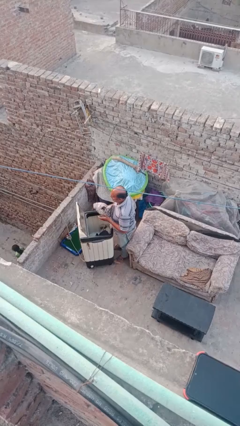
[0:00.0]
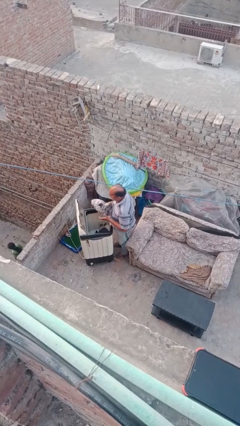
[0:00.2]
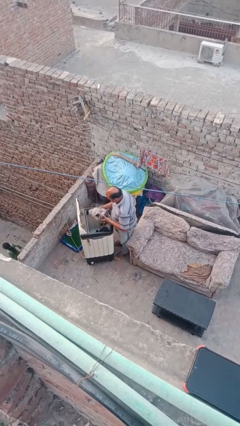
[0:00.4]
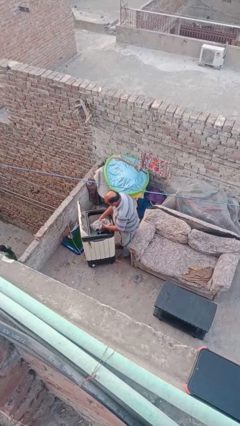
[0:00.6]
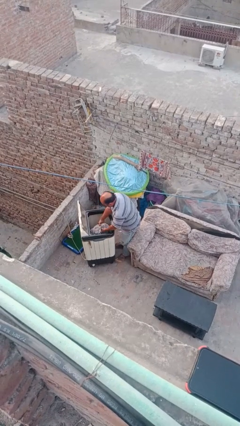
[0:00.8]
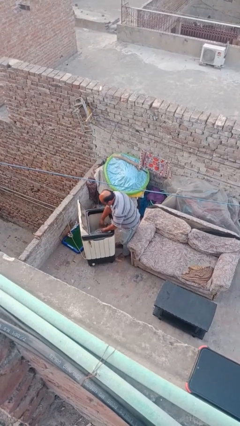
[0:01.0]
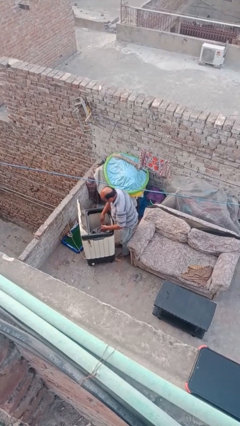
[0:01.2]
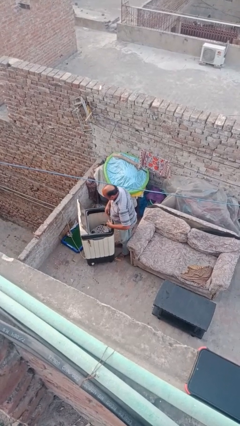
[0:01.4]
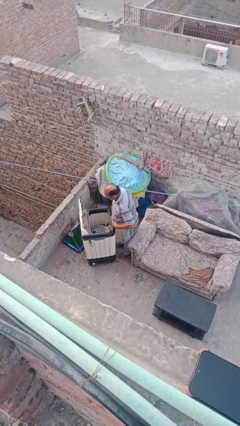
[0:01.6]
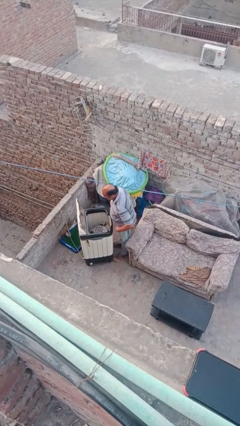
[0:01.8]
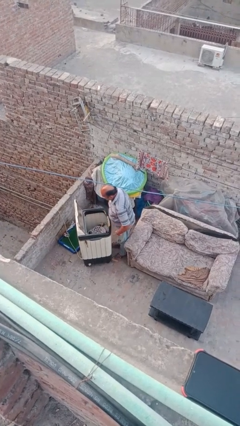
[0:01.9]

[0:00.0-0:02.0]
person loads clotheswasher

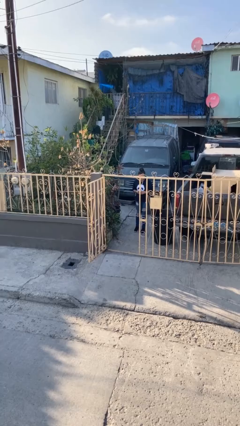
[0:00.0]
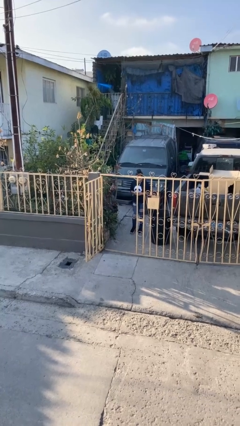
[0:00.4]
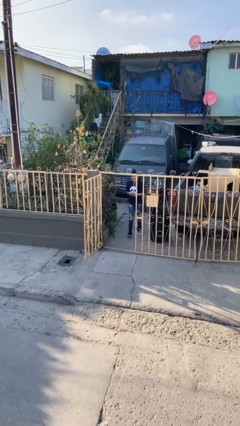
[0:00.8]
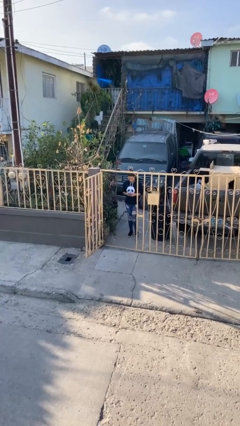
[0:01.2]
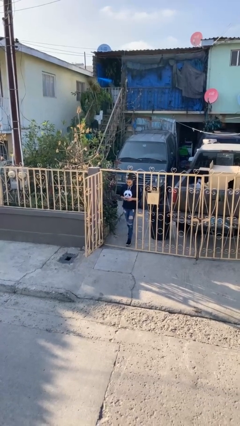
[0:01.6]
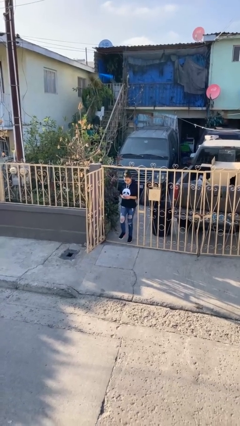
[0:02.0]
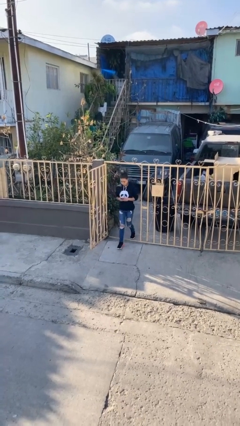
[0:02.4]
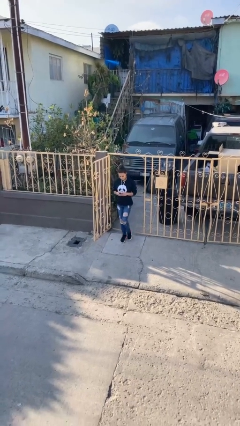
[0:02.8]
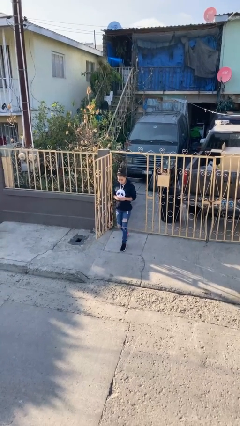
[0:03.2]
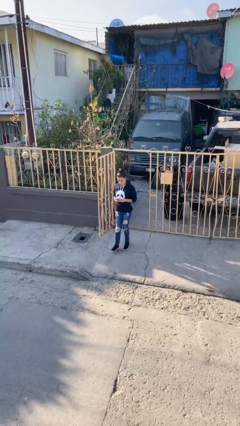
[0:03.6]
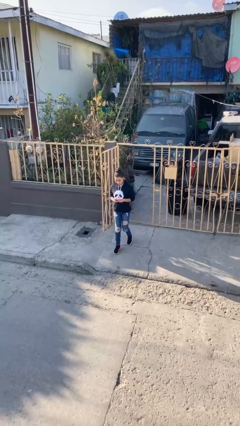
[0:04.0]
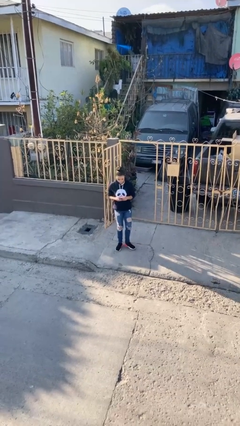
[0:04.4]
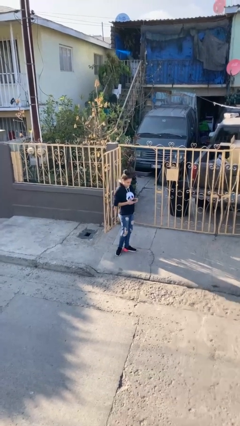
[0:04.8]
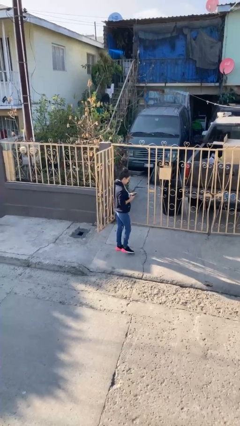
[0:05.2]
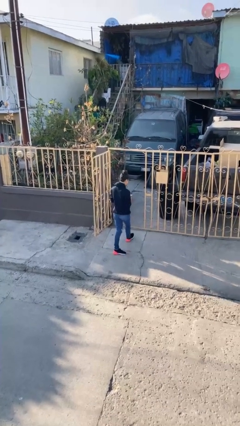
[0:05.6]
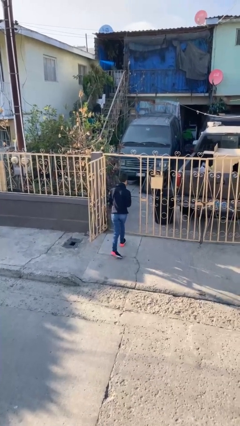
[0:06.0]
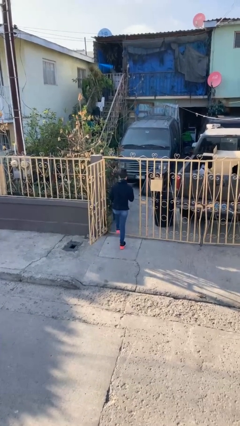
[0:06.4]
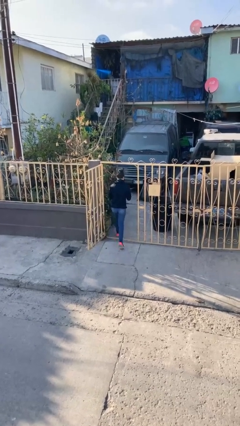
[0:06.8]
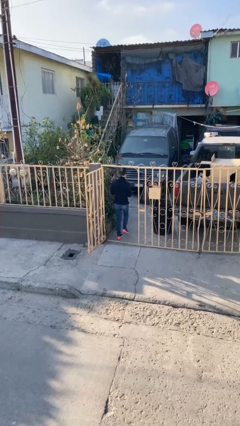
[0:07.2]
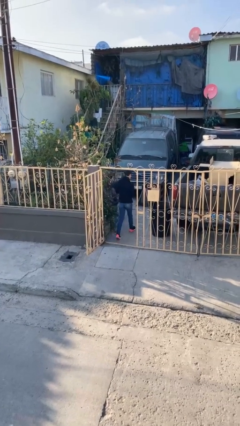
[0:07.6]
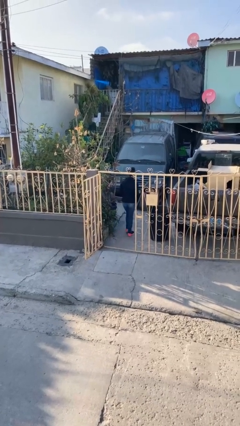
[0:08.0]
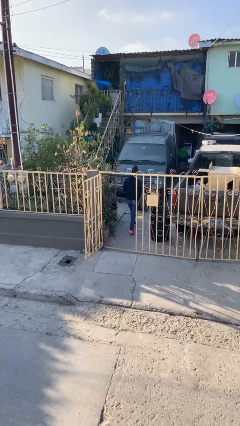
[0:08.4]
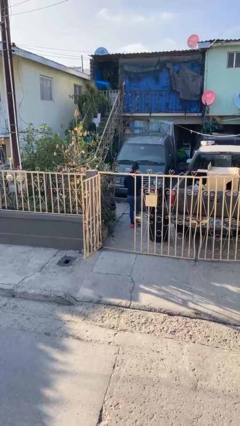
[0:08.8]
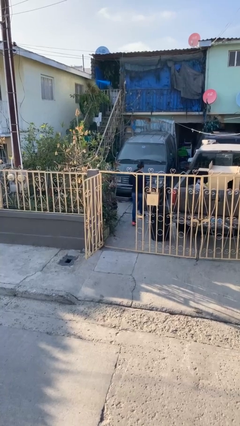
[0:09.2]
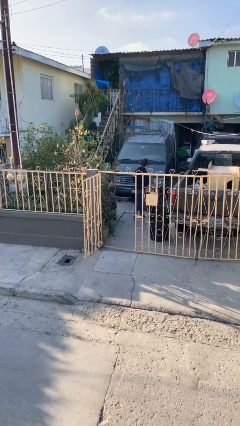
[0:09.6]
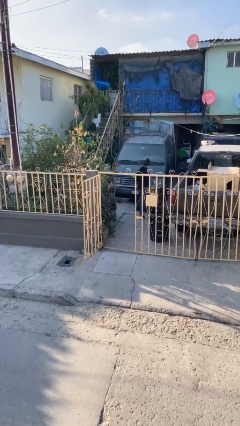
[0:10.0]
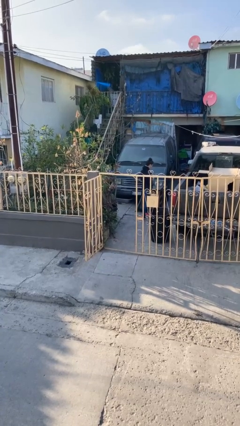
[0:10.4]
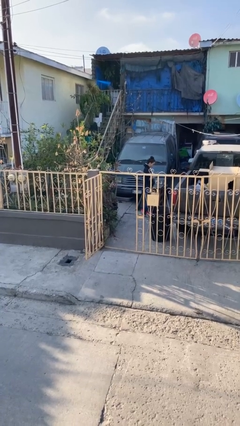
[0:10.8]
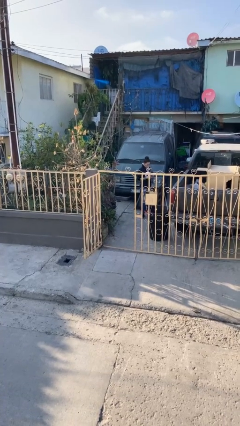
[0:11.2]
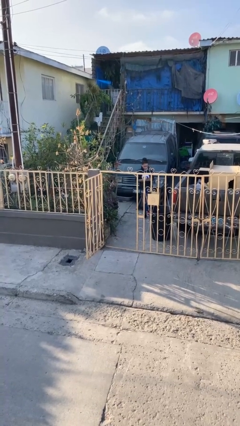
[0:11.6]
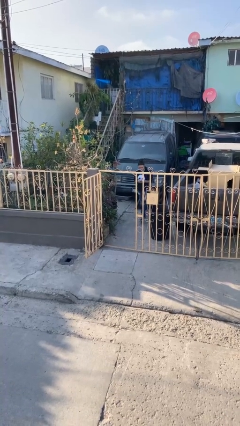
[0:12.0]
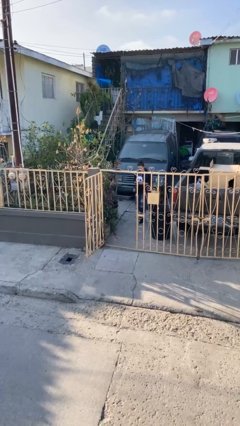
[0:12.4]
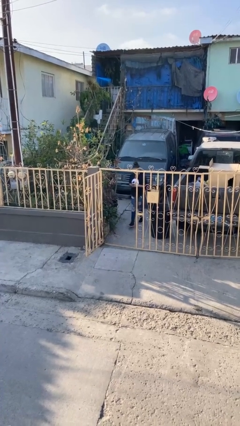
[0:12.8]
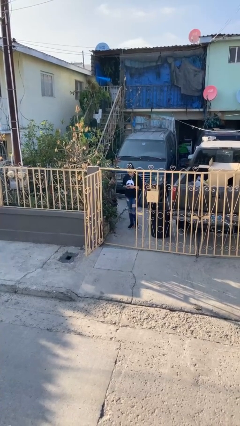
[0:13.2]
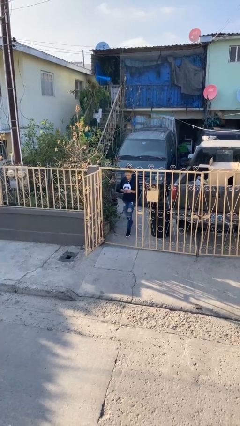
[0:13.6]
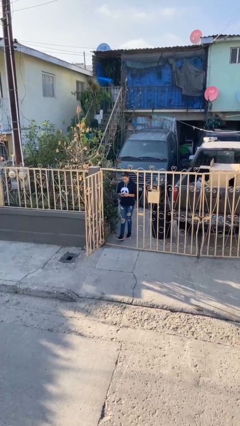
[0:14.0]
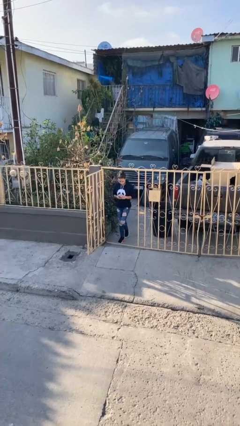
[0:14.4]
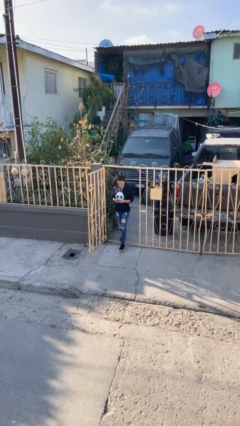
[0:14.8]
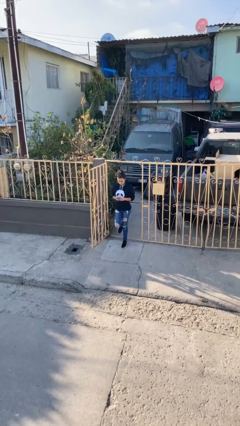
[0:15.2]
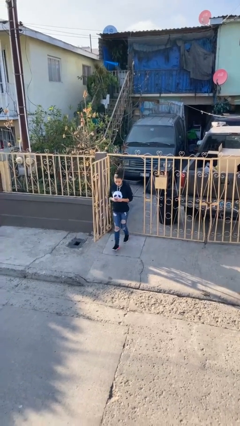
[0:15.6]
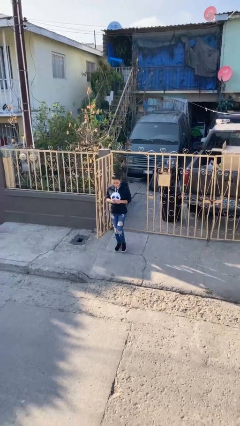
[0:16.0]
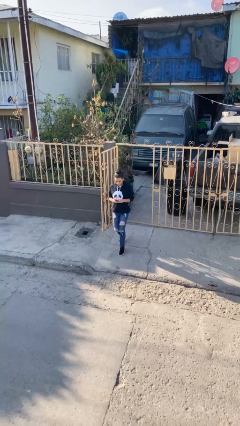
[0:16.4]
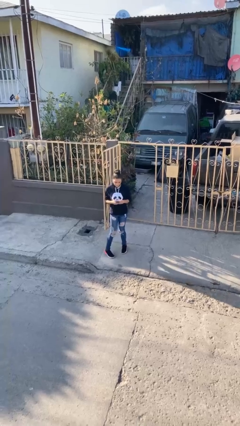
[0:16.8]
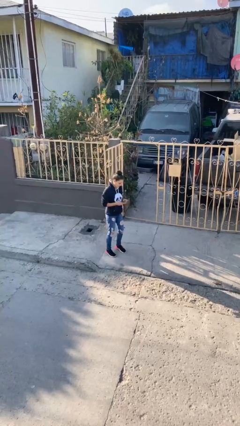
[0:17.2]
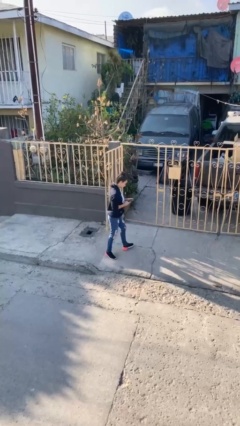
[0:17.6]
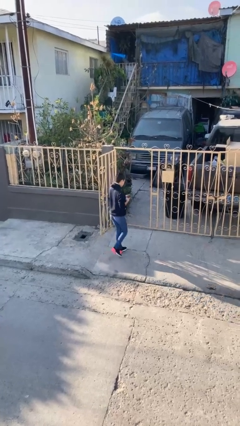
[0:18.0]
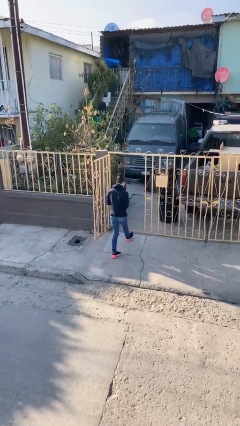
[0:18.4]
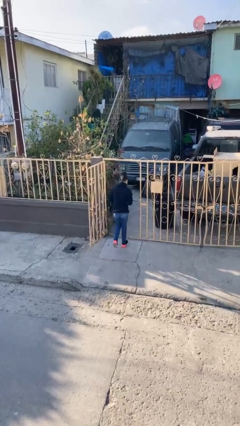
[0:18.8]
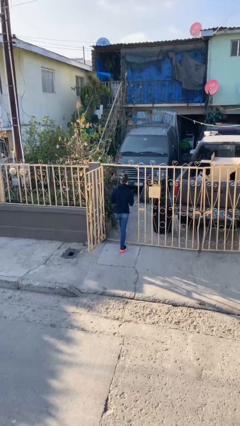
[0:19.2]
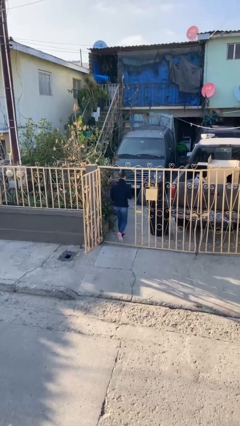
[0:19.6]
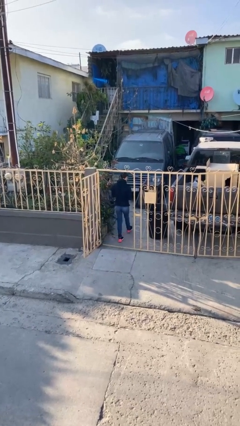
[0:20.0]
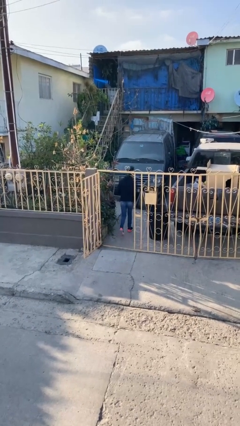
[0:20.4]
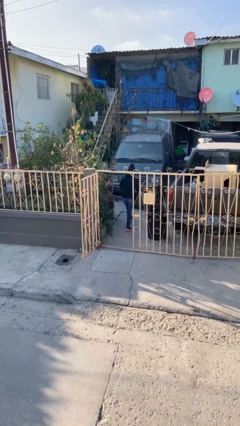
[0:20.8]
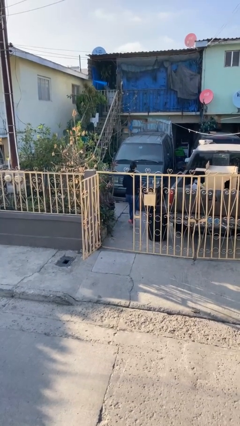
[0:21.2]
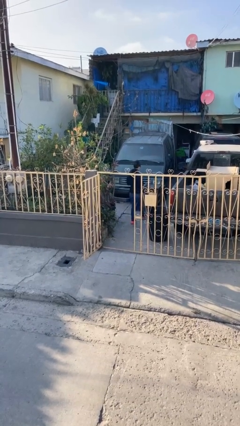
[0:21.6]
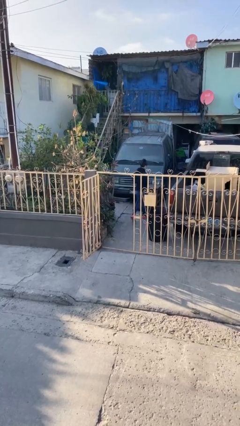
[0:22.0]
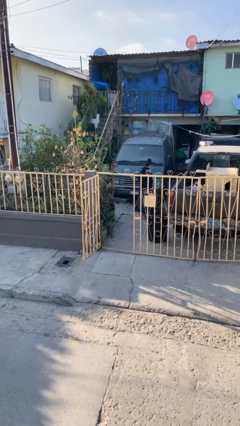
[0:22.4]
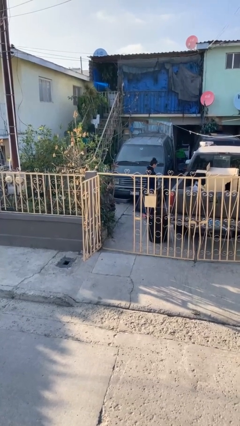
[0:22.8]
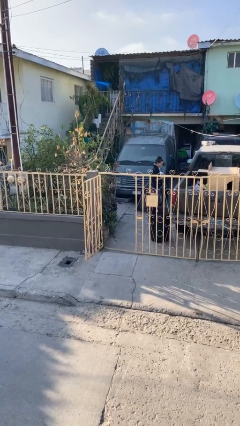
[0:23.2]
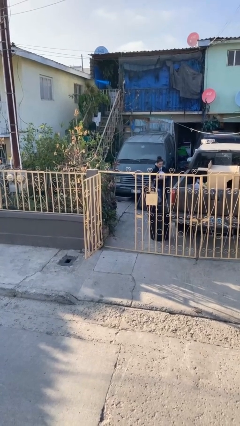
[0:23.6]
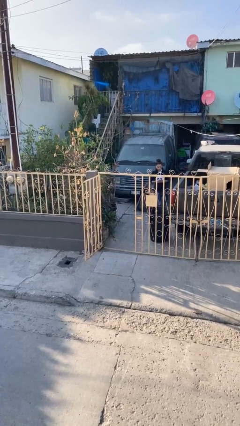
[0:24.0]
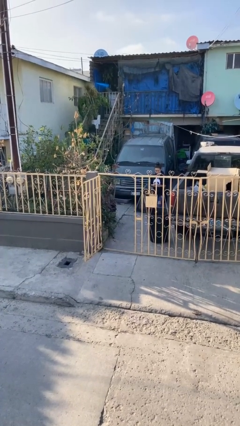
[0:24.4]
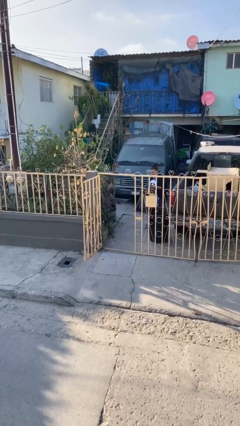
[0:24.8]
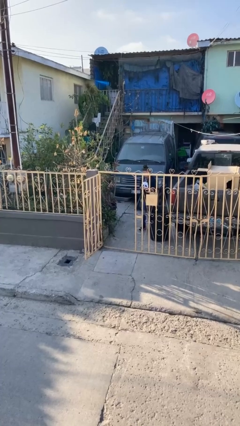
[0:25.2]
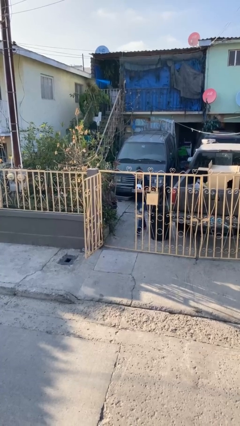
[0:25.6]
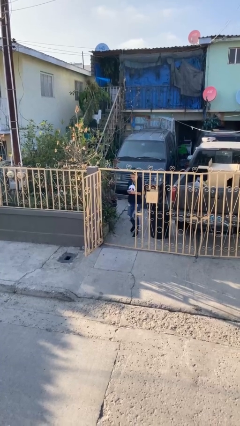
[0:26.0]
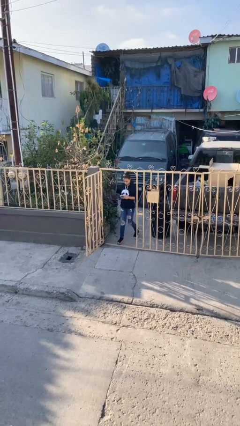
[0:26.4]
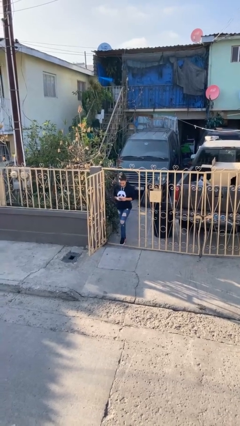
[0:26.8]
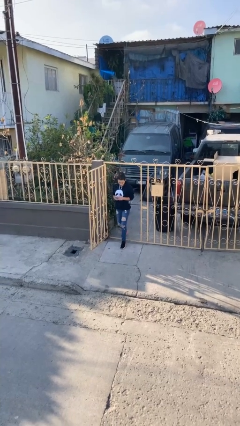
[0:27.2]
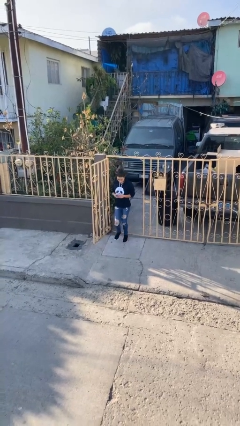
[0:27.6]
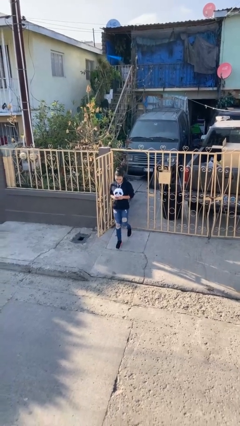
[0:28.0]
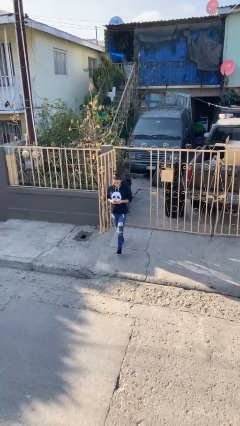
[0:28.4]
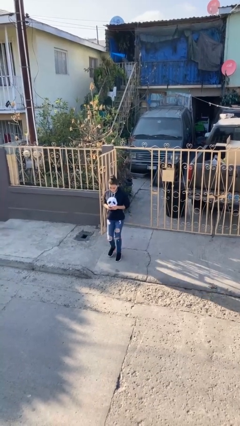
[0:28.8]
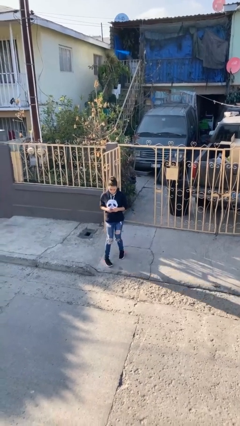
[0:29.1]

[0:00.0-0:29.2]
person texts on phone

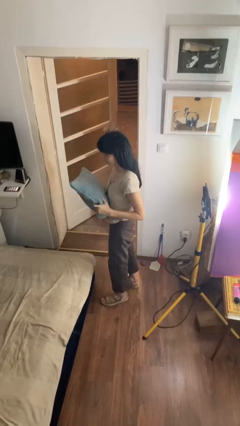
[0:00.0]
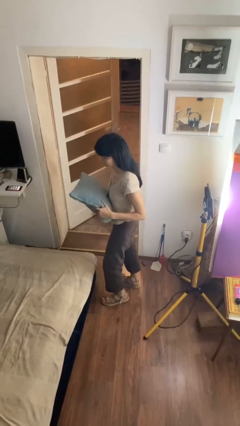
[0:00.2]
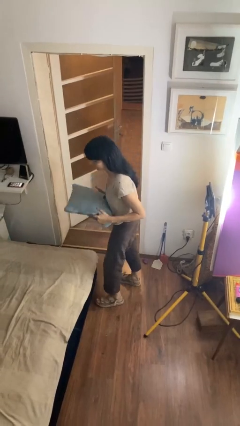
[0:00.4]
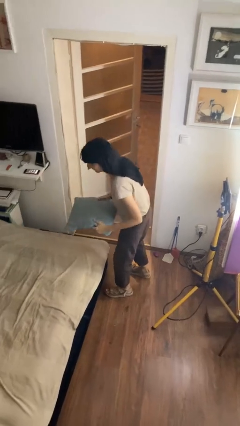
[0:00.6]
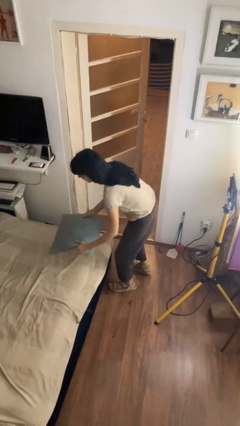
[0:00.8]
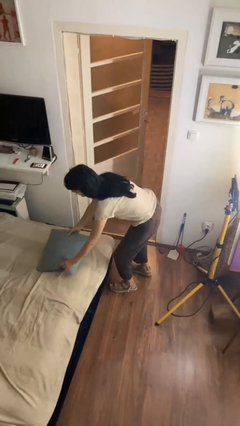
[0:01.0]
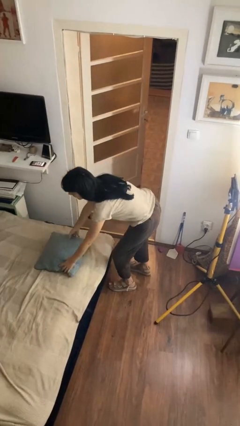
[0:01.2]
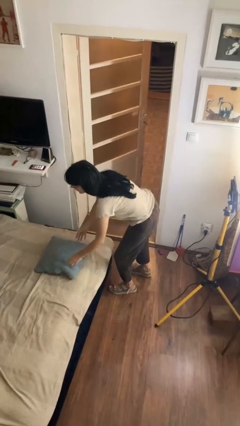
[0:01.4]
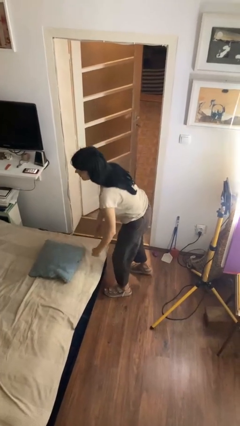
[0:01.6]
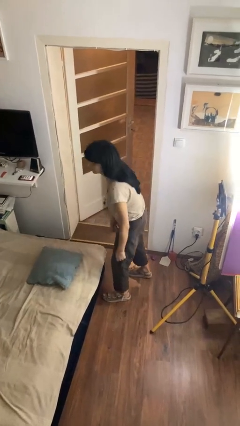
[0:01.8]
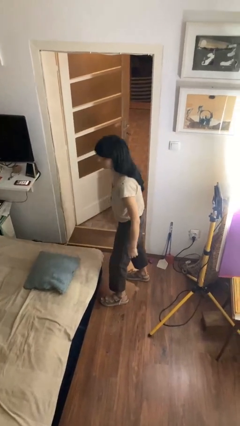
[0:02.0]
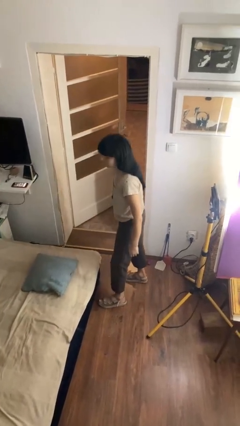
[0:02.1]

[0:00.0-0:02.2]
person puts down object on bed
